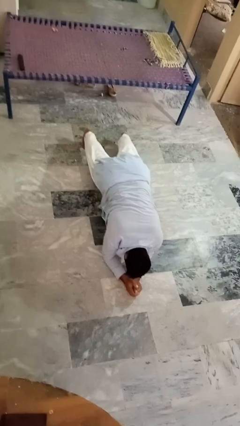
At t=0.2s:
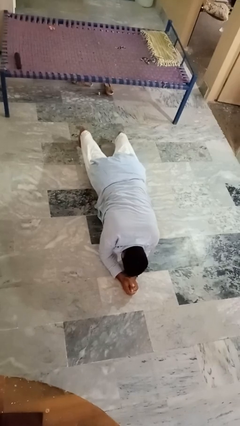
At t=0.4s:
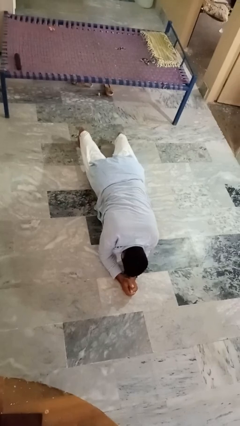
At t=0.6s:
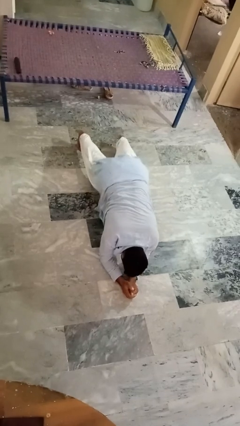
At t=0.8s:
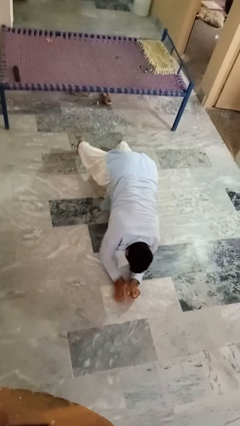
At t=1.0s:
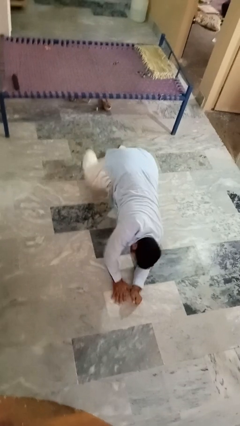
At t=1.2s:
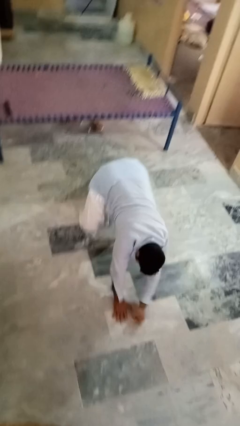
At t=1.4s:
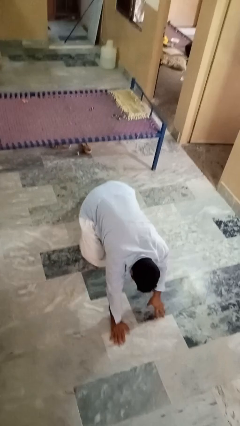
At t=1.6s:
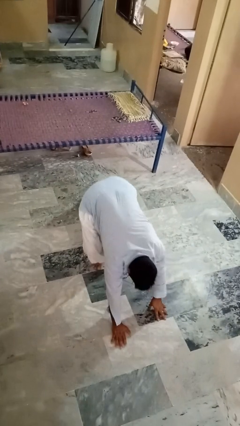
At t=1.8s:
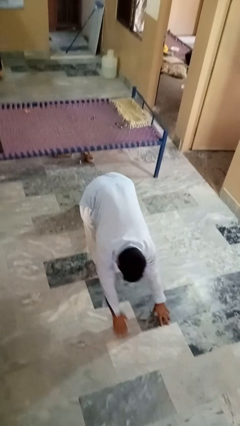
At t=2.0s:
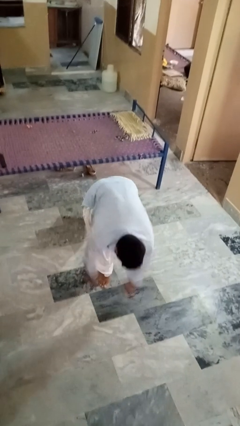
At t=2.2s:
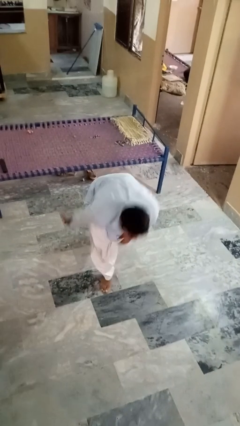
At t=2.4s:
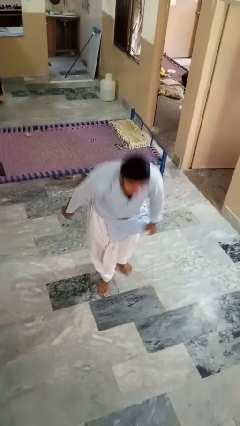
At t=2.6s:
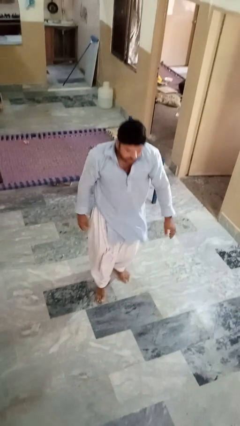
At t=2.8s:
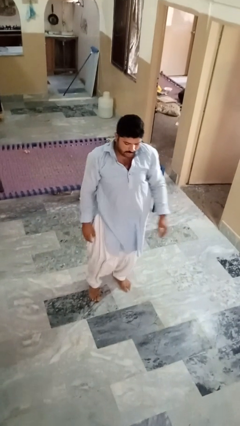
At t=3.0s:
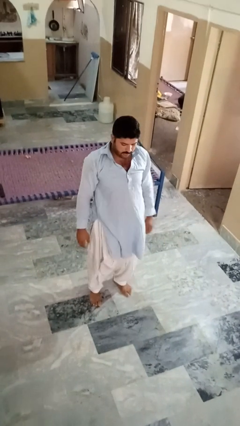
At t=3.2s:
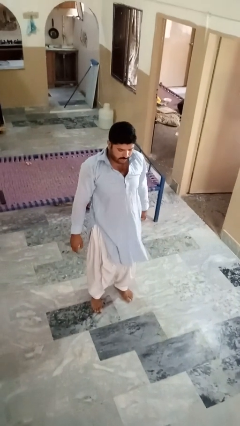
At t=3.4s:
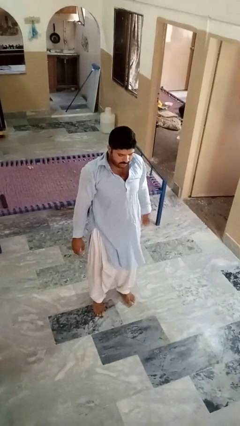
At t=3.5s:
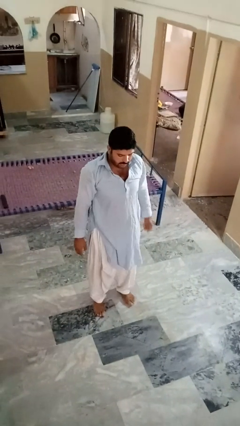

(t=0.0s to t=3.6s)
person stands up from floor

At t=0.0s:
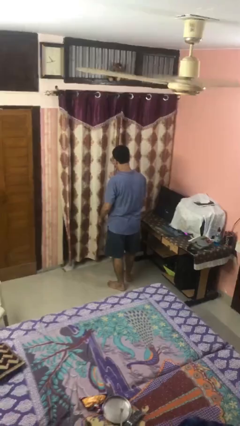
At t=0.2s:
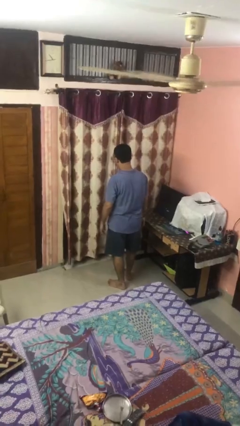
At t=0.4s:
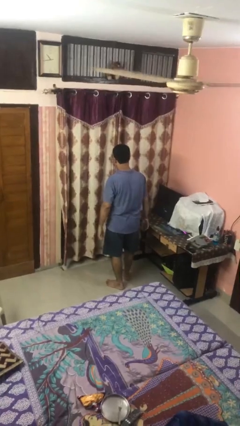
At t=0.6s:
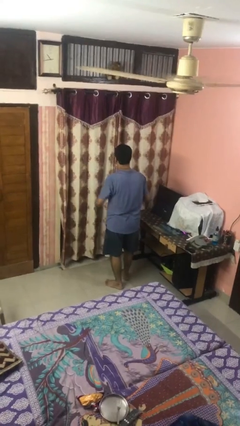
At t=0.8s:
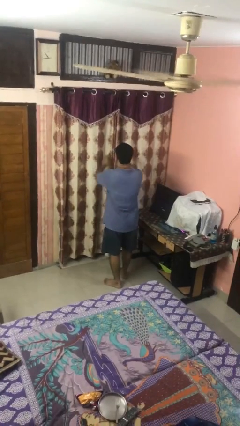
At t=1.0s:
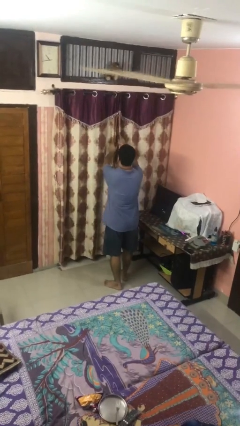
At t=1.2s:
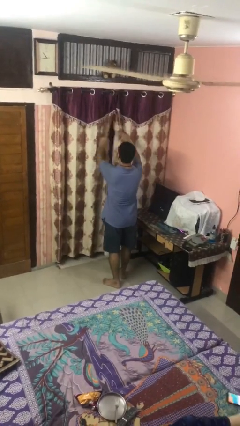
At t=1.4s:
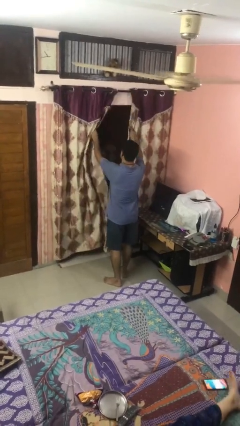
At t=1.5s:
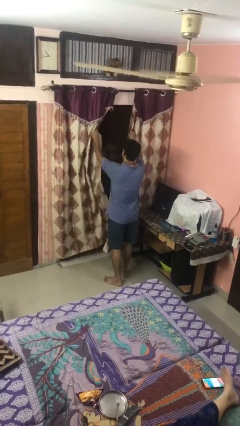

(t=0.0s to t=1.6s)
person opens curtains

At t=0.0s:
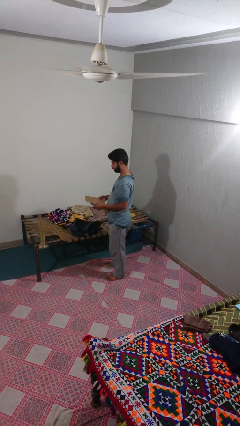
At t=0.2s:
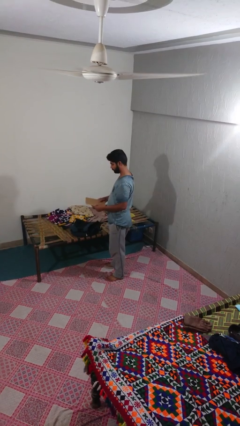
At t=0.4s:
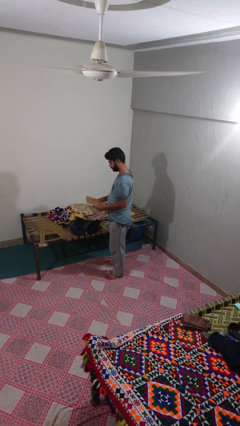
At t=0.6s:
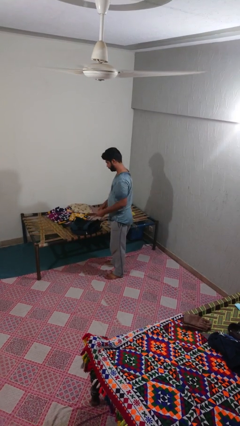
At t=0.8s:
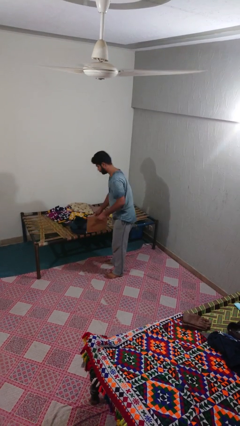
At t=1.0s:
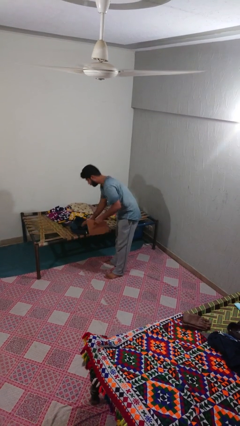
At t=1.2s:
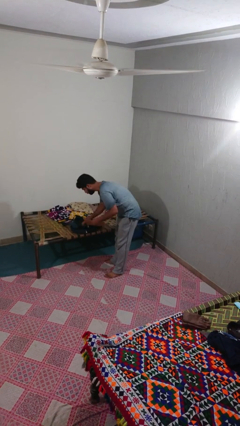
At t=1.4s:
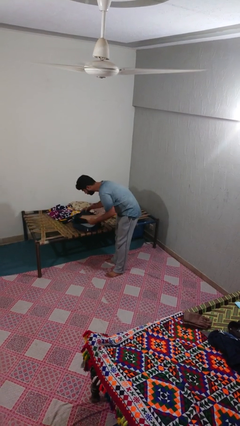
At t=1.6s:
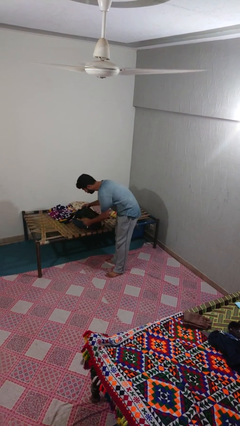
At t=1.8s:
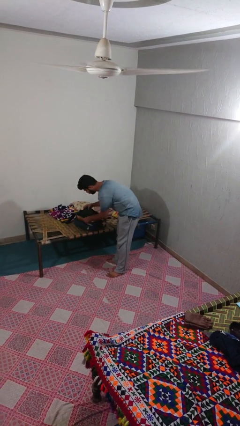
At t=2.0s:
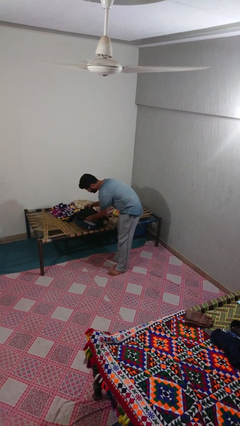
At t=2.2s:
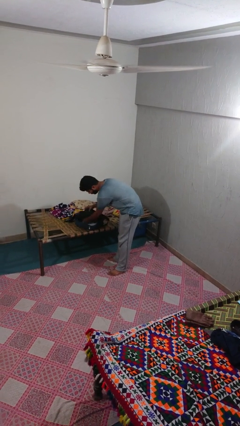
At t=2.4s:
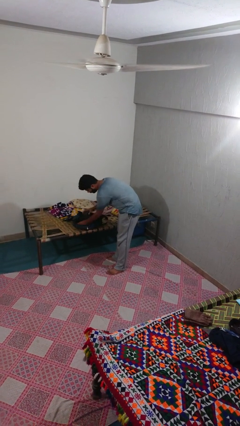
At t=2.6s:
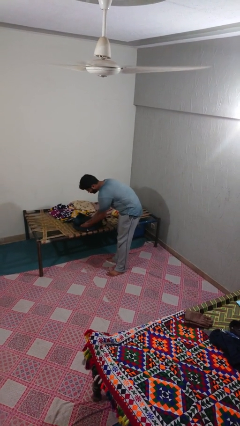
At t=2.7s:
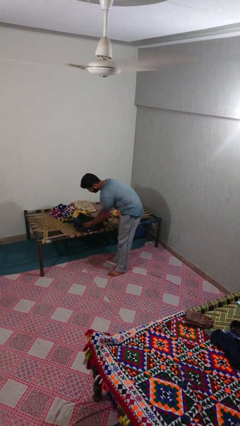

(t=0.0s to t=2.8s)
person puts object into backpack

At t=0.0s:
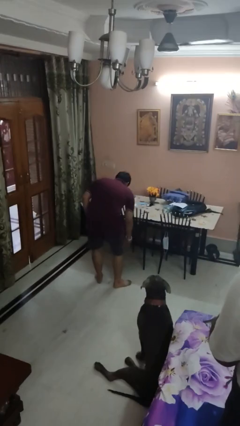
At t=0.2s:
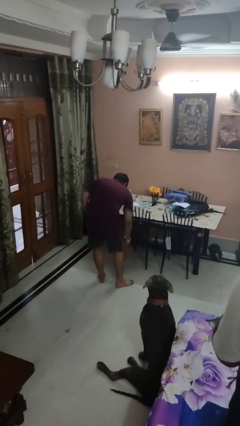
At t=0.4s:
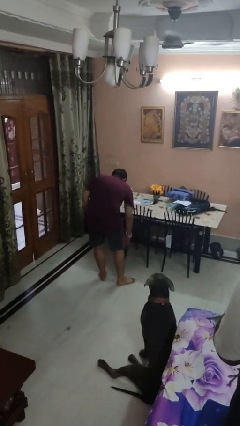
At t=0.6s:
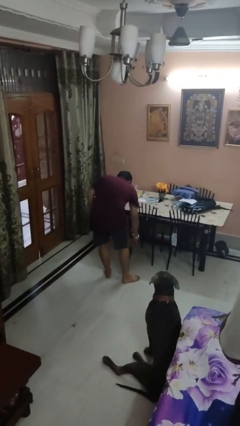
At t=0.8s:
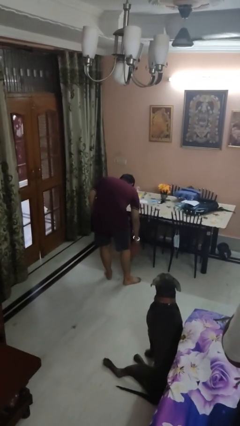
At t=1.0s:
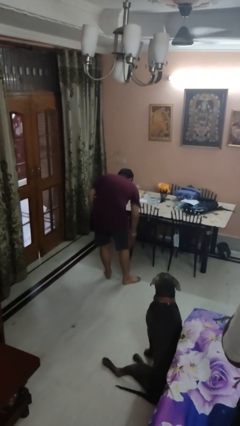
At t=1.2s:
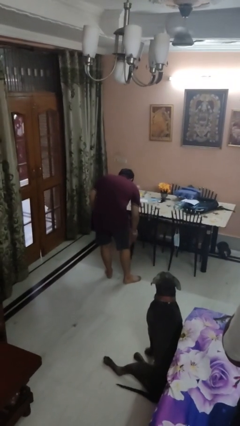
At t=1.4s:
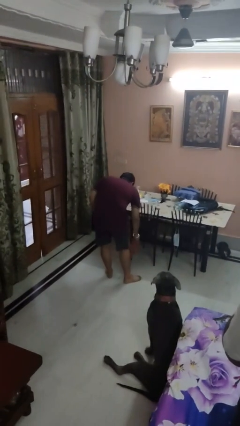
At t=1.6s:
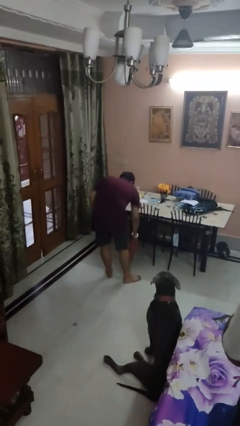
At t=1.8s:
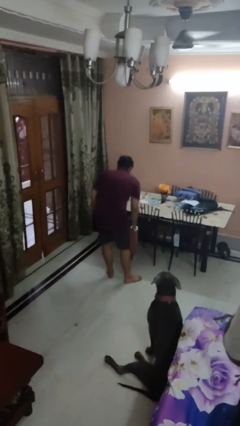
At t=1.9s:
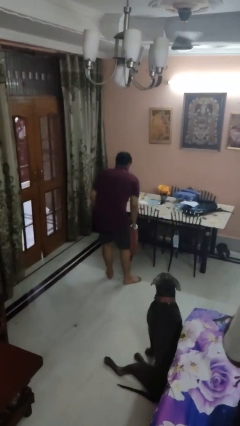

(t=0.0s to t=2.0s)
person dusts furniture

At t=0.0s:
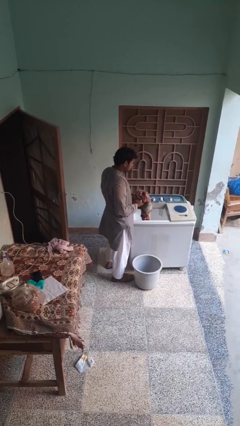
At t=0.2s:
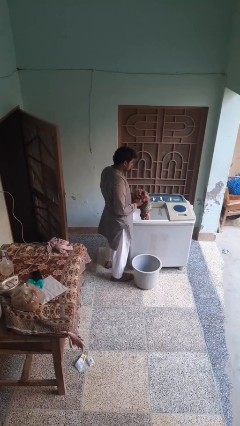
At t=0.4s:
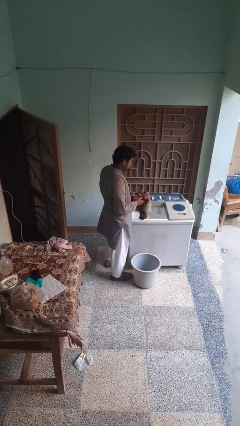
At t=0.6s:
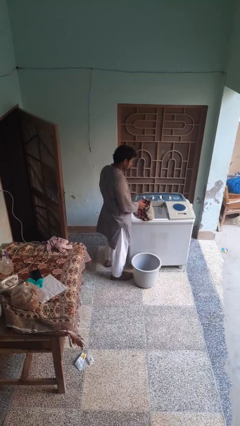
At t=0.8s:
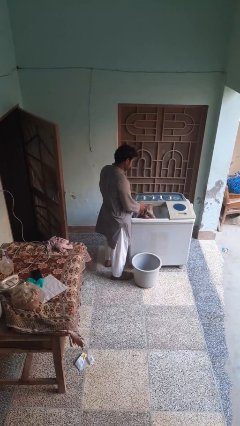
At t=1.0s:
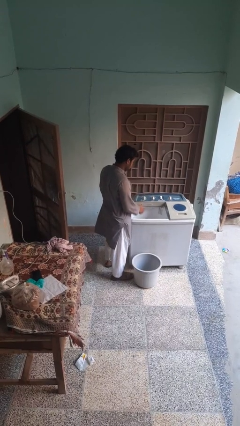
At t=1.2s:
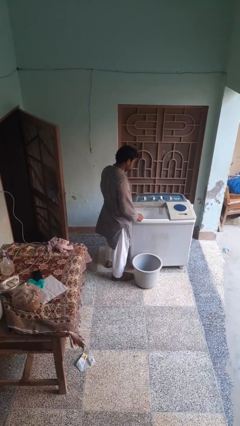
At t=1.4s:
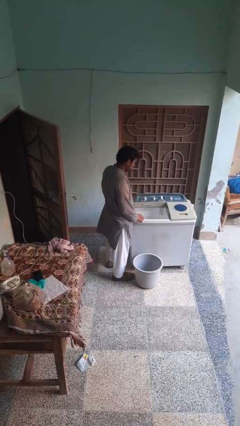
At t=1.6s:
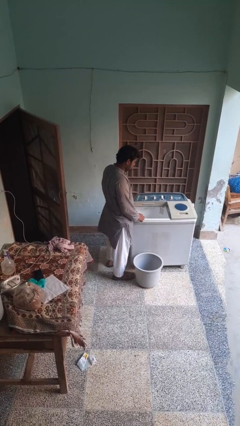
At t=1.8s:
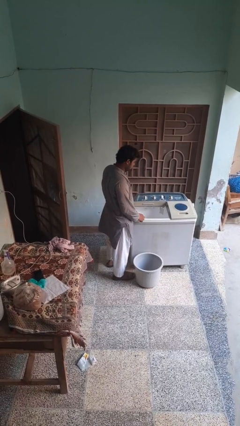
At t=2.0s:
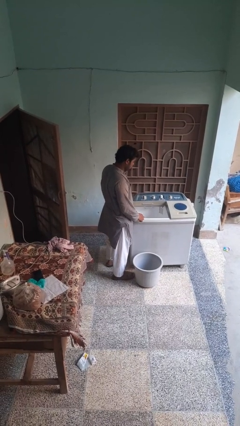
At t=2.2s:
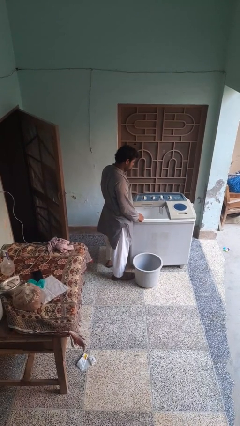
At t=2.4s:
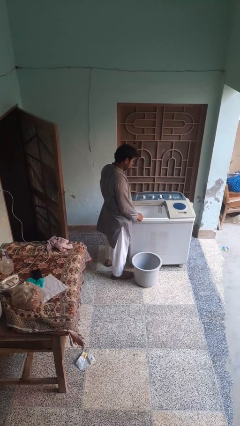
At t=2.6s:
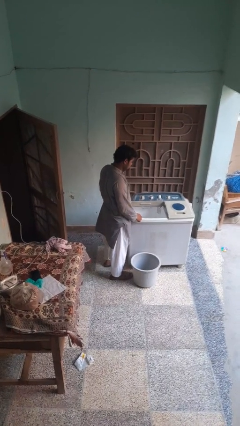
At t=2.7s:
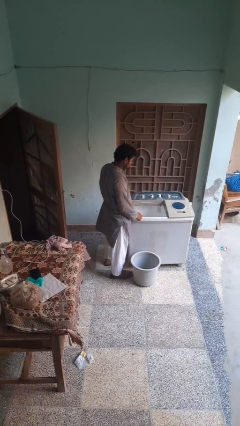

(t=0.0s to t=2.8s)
person loads clotheswasher

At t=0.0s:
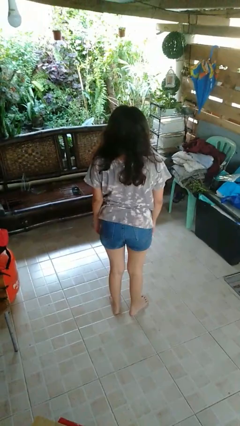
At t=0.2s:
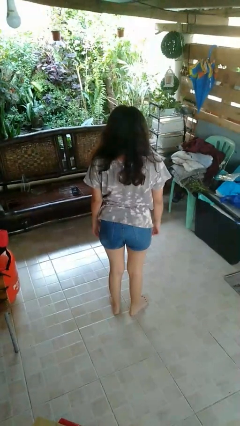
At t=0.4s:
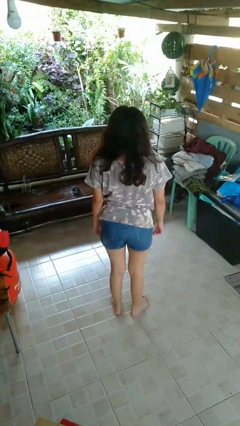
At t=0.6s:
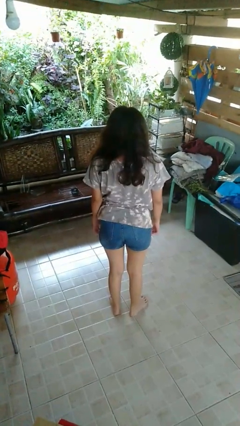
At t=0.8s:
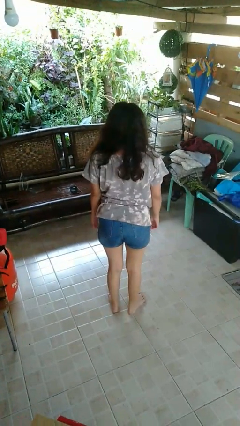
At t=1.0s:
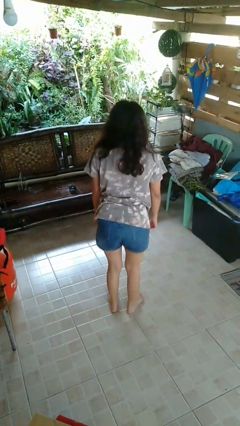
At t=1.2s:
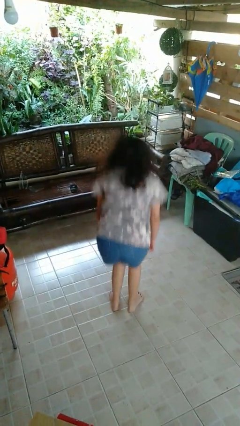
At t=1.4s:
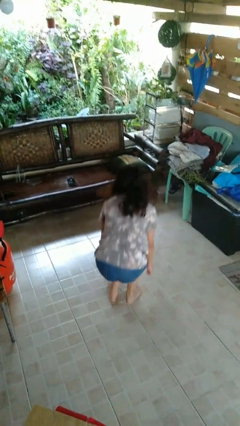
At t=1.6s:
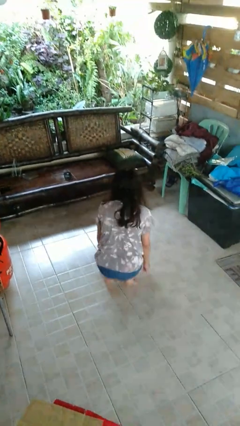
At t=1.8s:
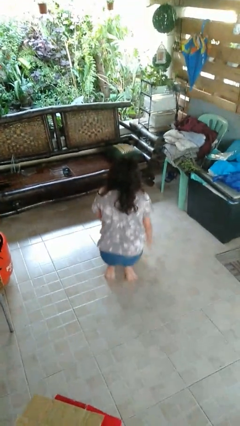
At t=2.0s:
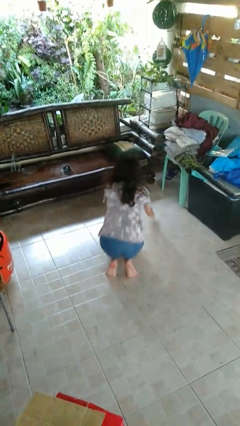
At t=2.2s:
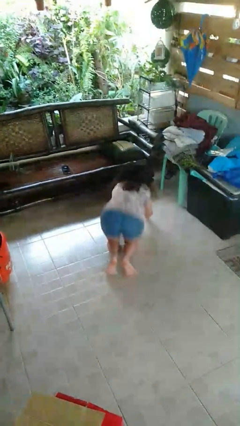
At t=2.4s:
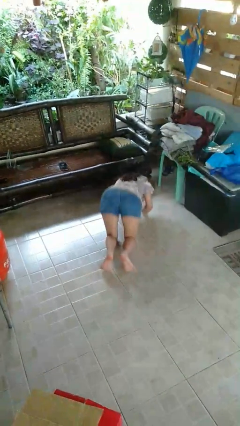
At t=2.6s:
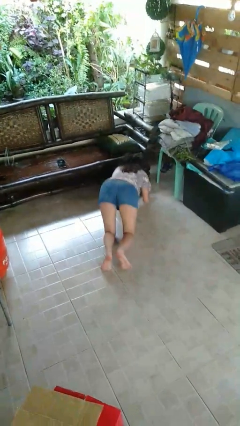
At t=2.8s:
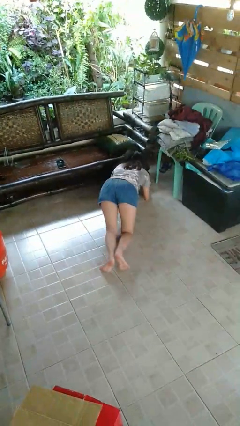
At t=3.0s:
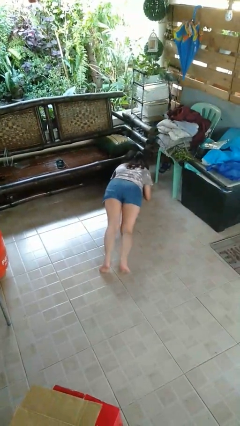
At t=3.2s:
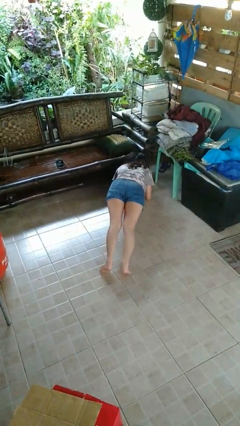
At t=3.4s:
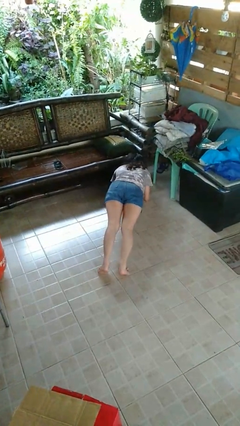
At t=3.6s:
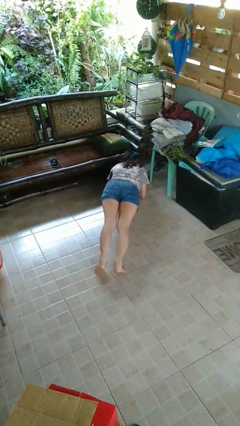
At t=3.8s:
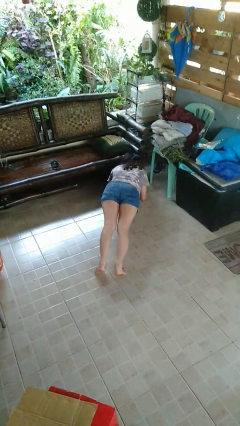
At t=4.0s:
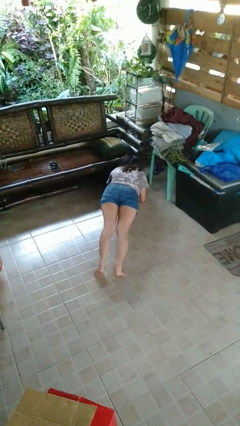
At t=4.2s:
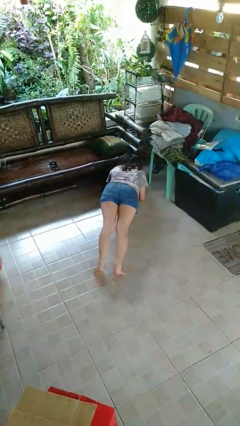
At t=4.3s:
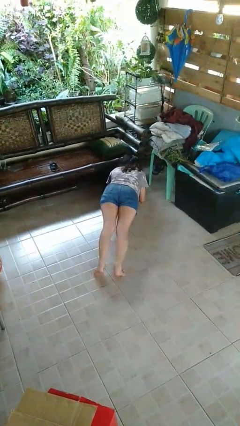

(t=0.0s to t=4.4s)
person exercises with plank
